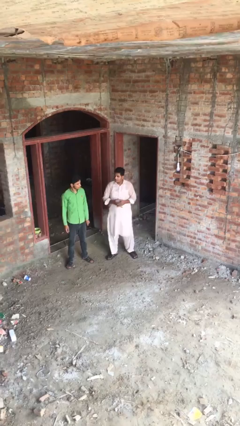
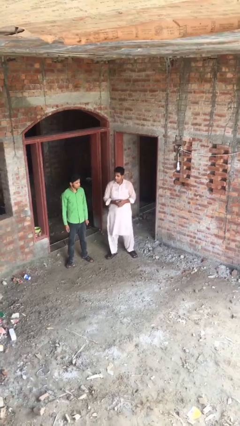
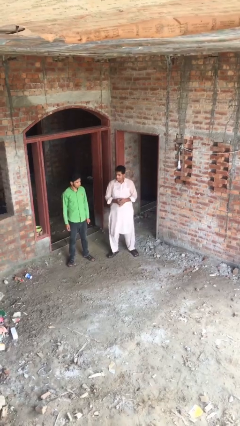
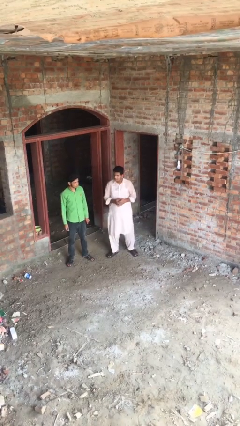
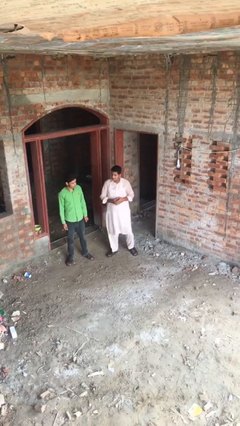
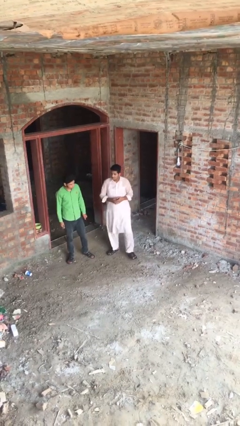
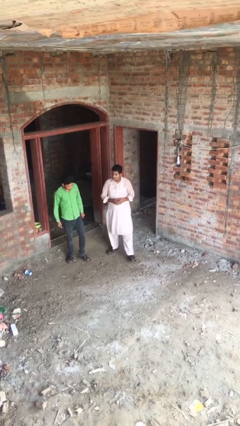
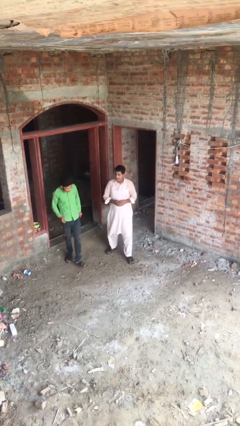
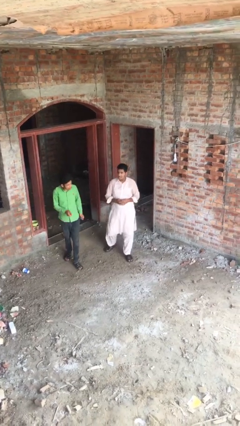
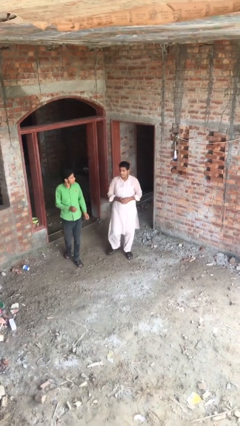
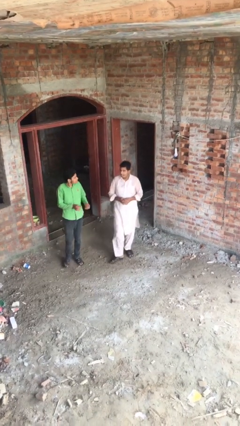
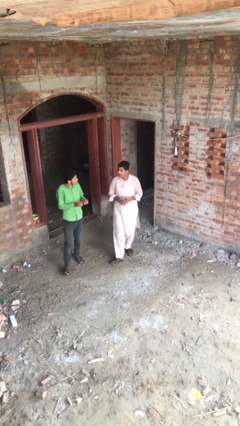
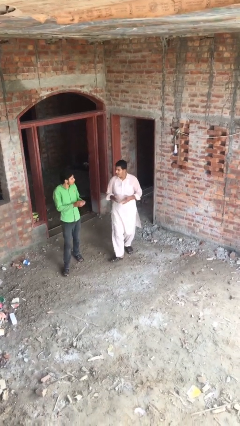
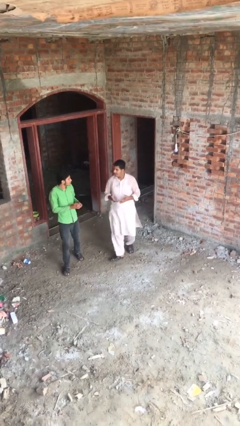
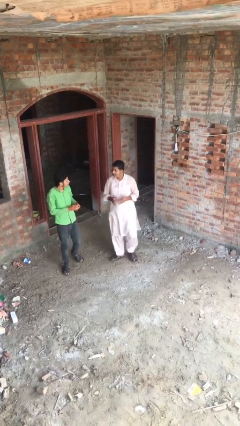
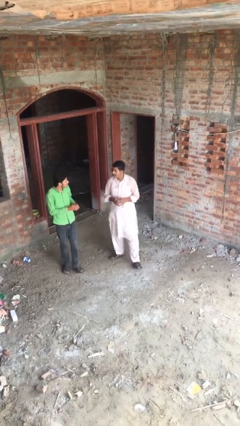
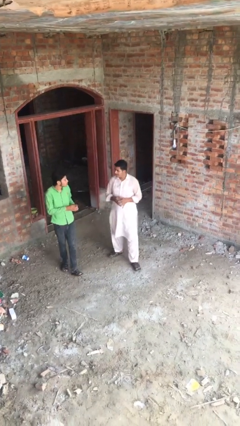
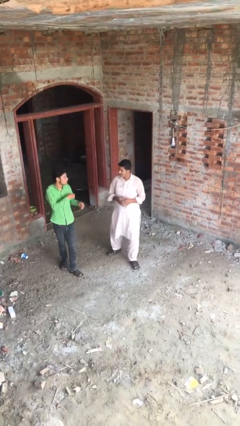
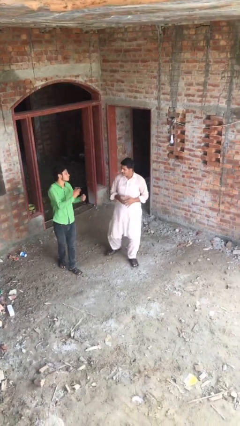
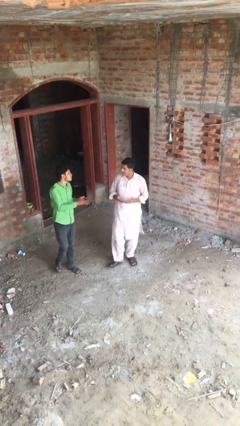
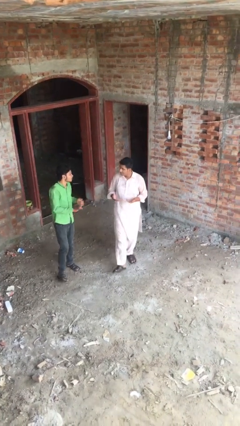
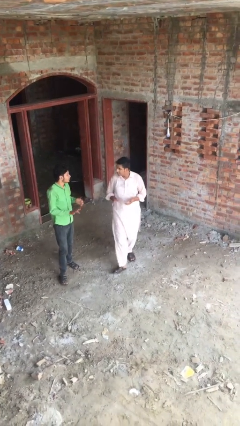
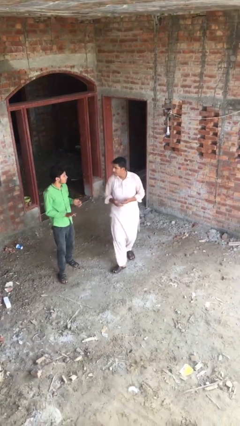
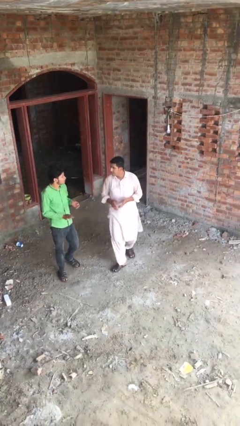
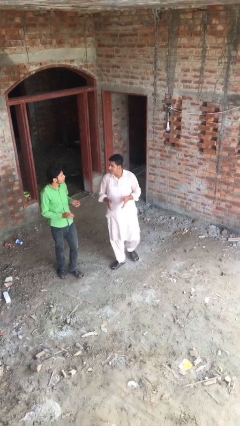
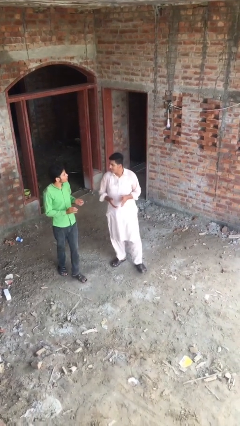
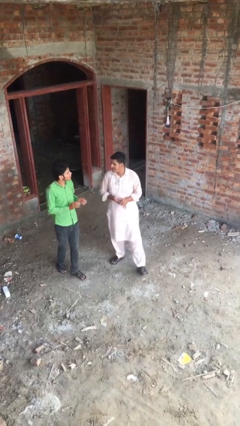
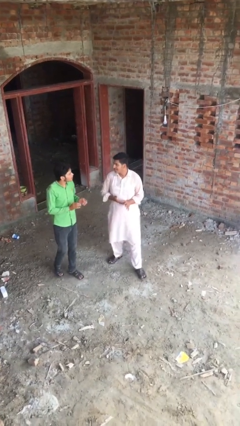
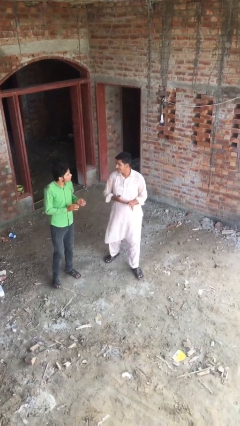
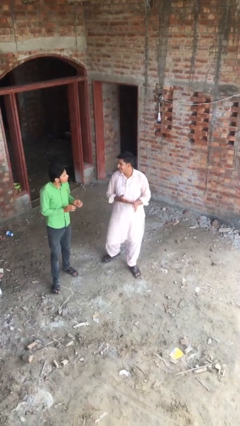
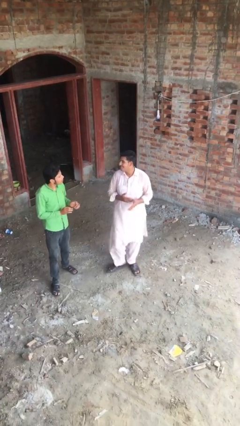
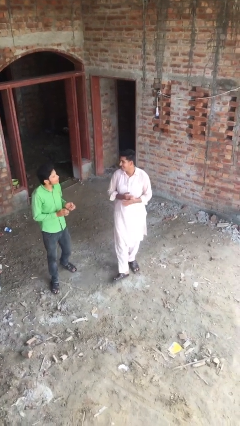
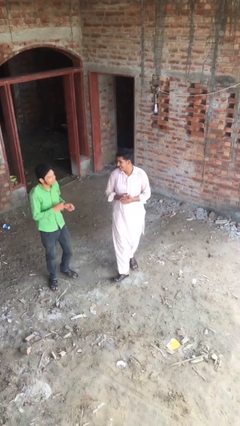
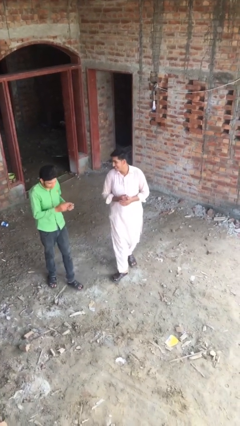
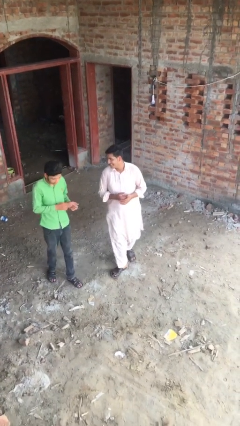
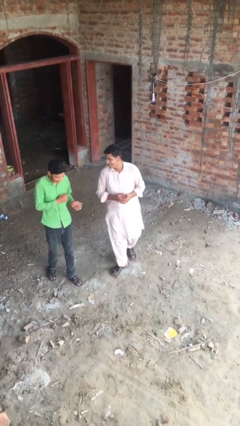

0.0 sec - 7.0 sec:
person talks to person

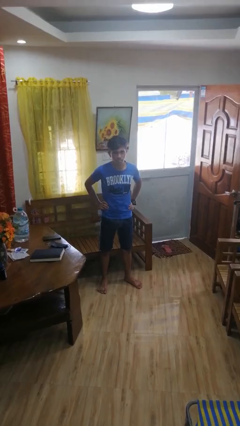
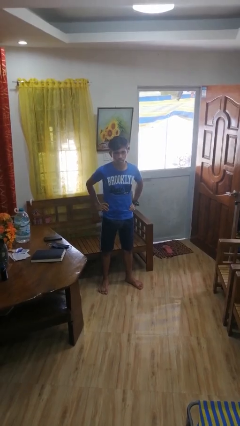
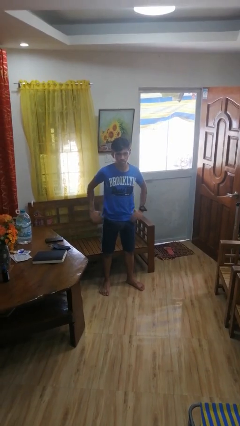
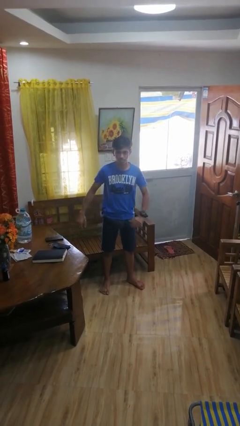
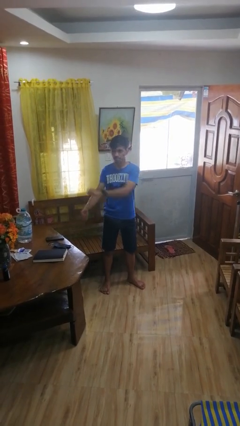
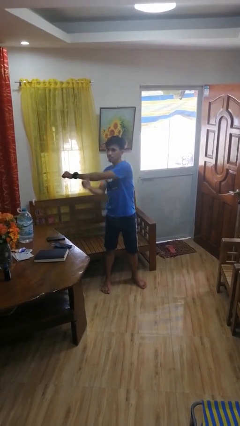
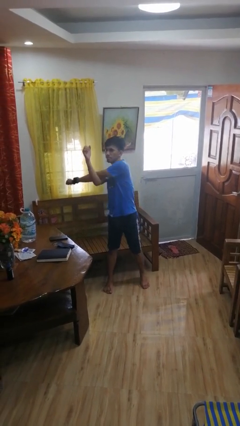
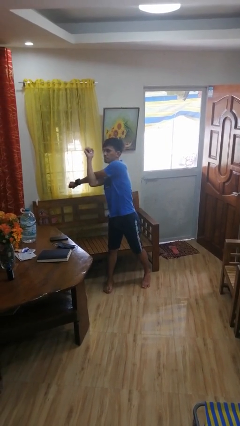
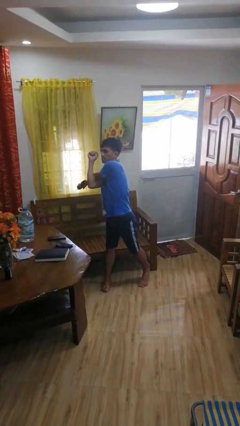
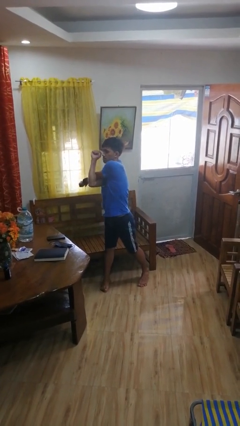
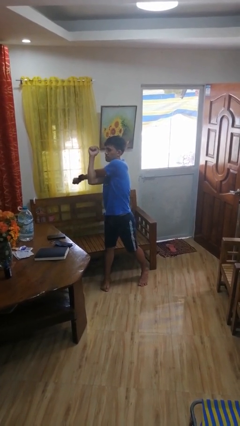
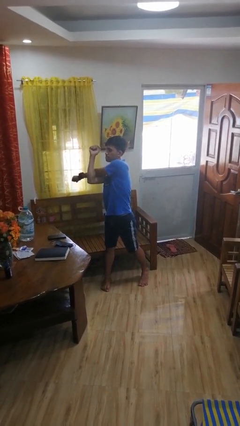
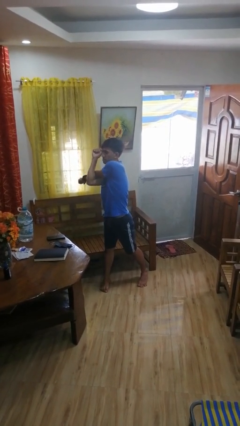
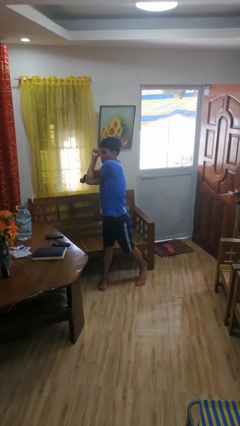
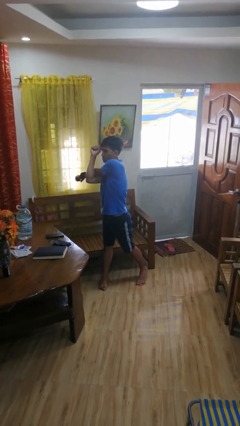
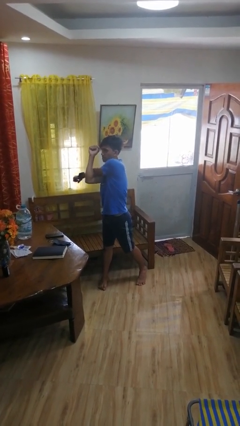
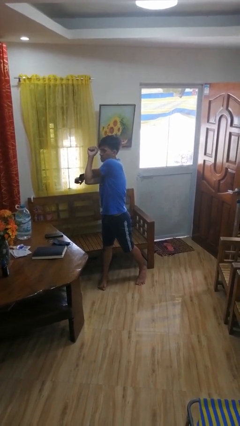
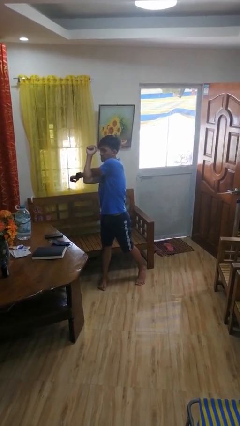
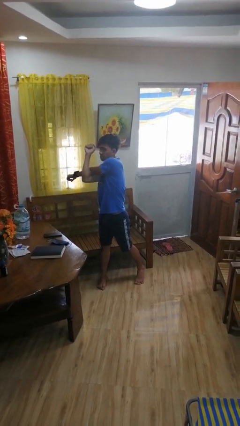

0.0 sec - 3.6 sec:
person stretches arms to side

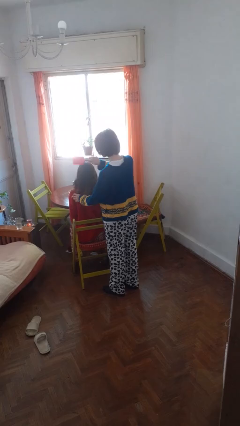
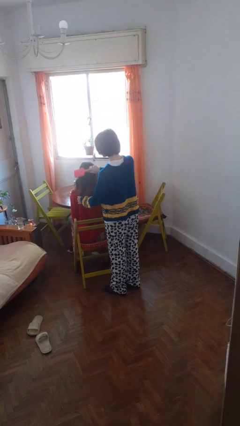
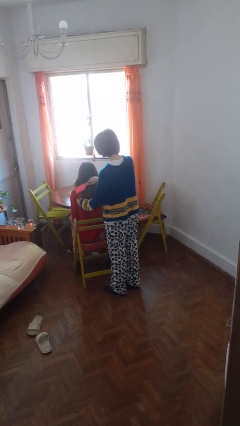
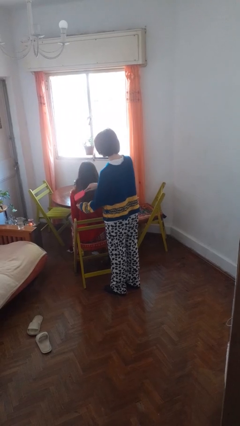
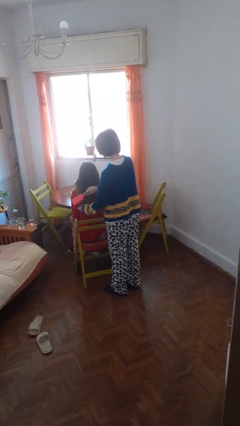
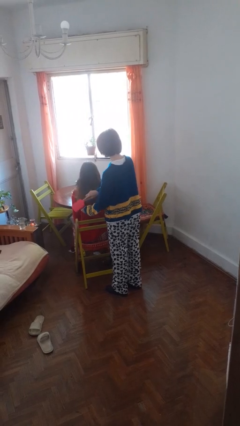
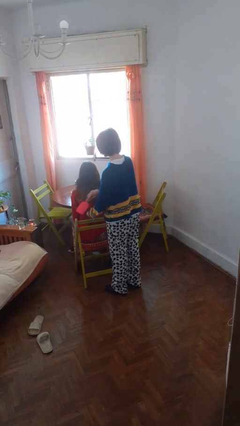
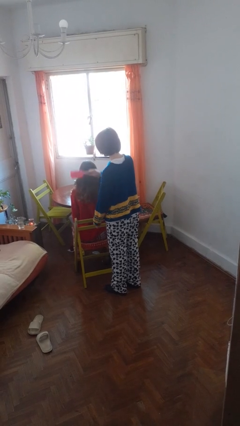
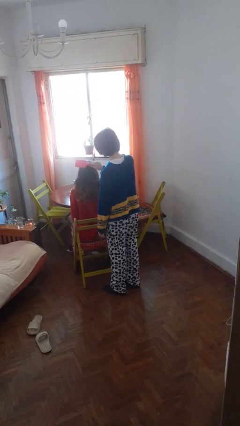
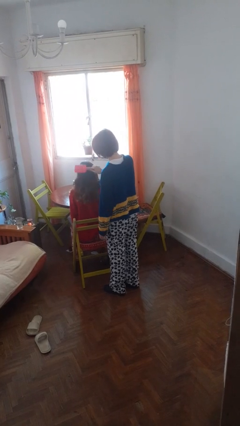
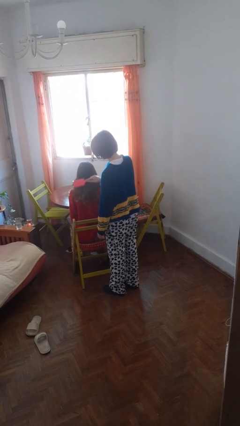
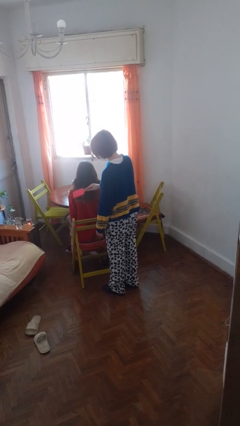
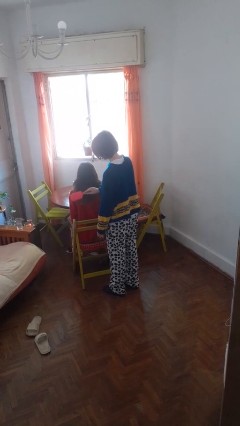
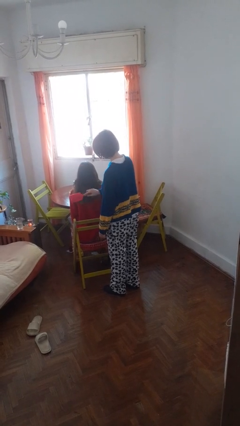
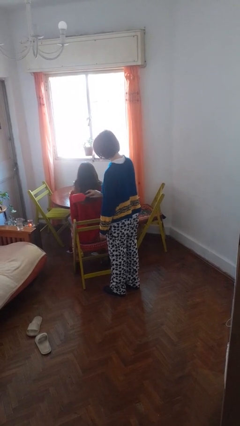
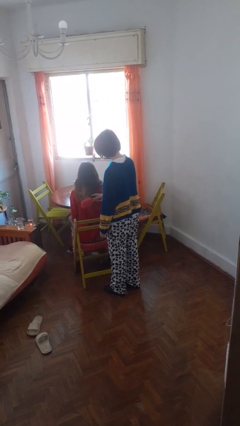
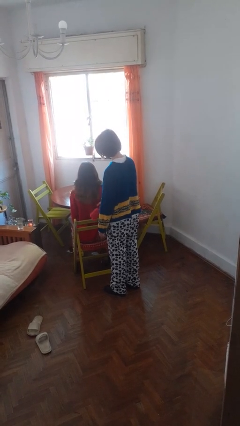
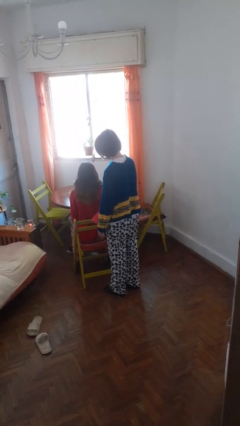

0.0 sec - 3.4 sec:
person brushes hair of person

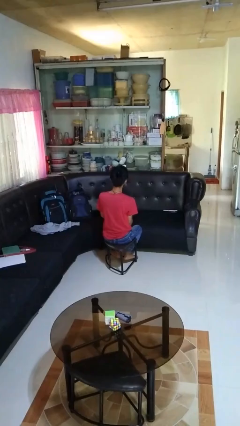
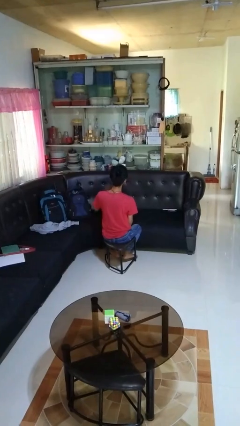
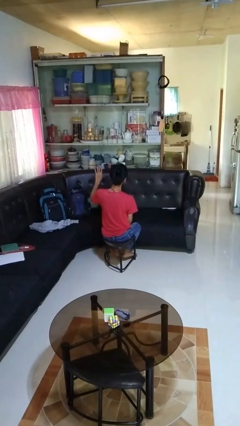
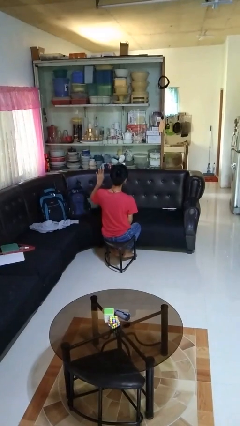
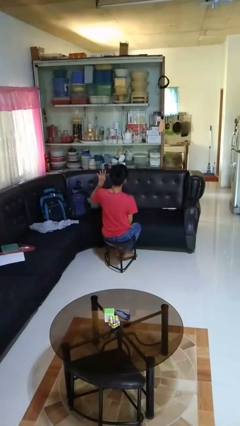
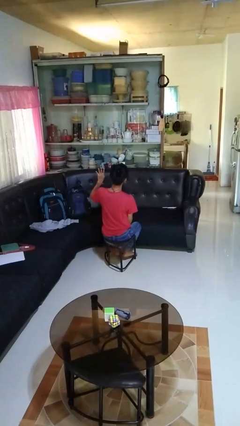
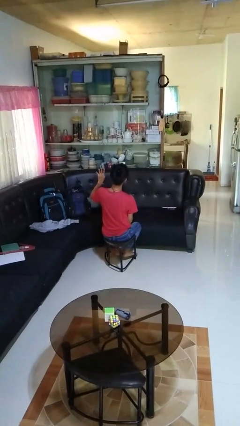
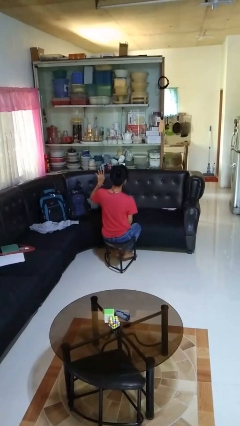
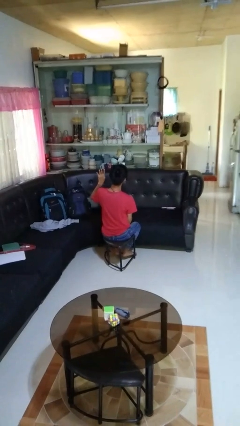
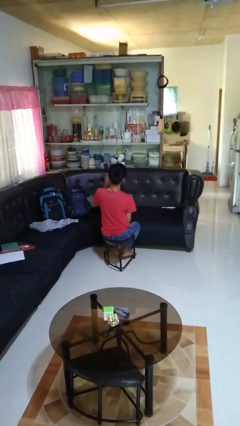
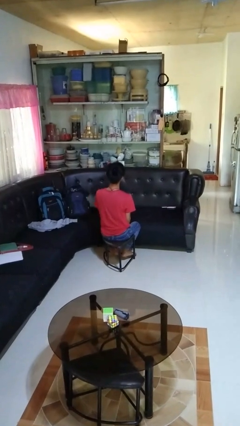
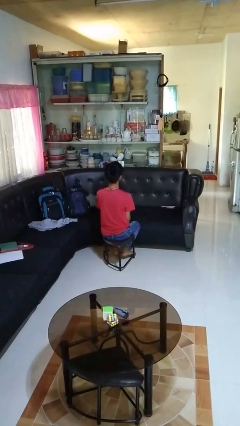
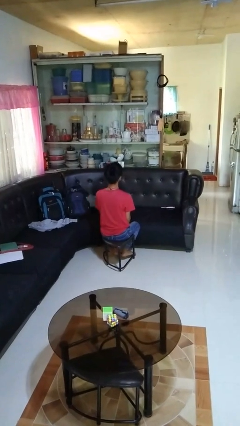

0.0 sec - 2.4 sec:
person gestures number four

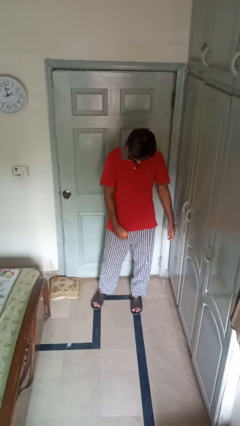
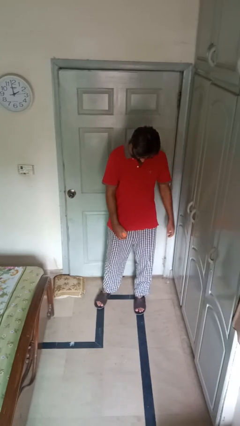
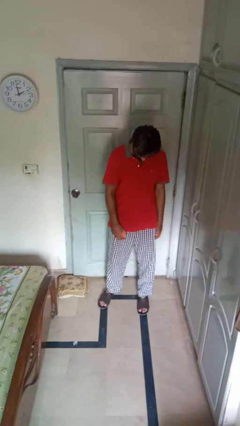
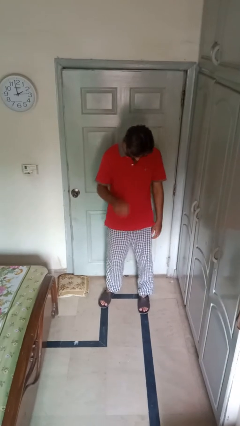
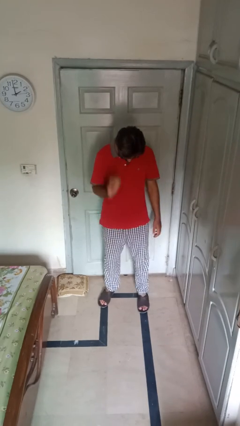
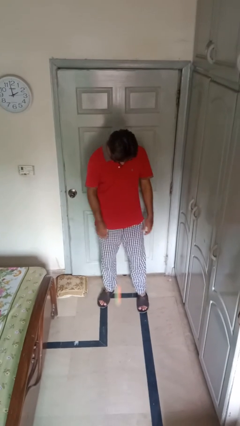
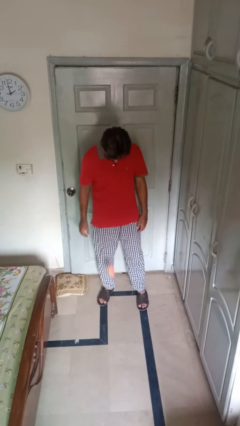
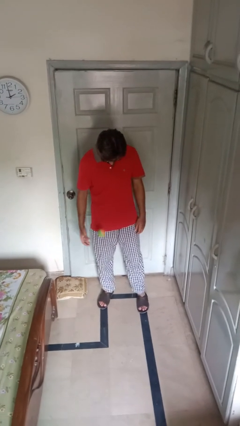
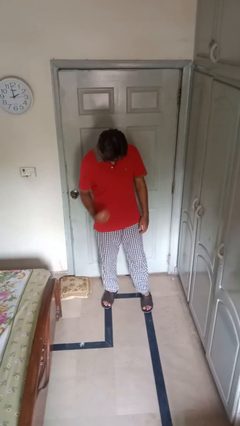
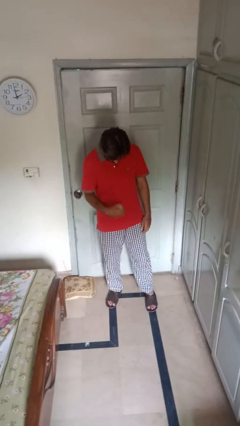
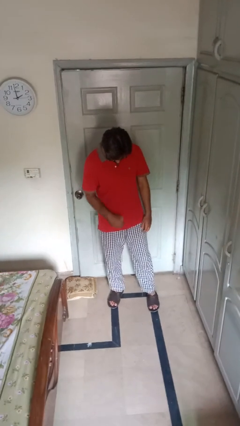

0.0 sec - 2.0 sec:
person bounces ball on floor
